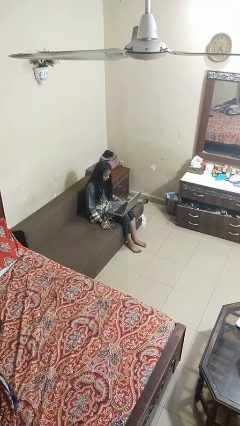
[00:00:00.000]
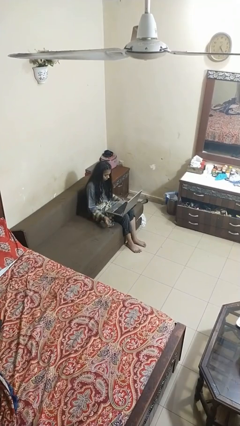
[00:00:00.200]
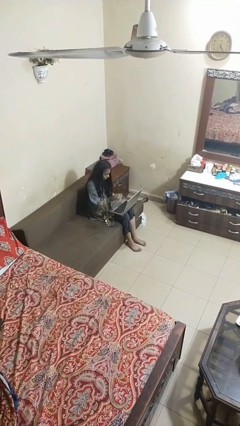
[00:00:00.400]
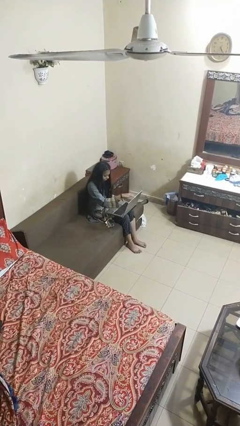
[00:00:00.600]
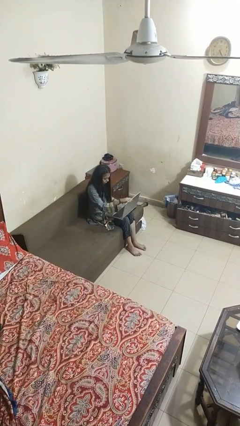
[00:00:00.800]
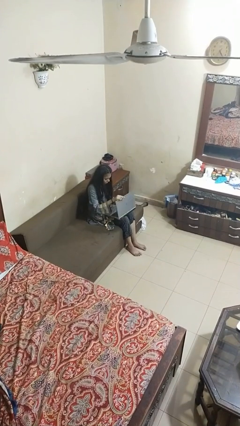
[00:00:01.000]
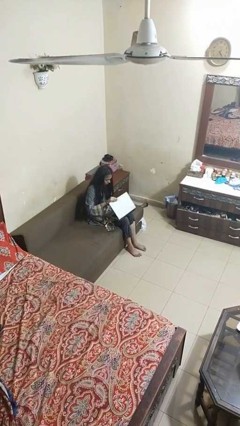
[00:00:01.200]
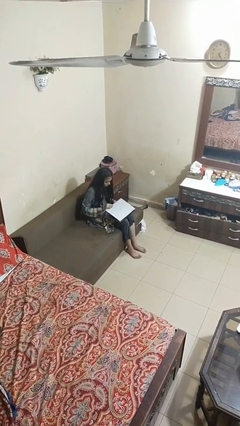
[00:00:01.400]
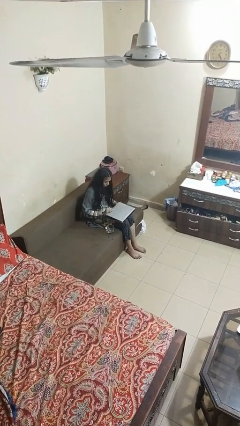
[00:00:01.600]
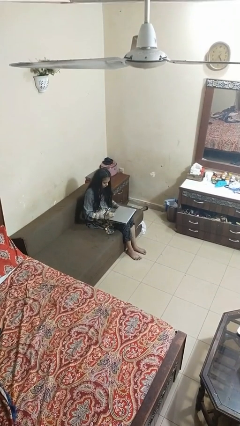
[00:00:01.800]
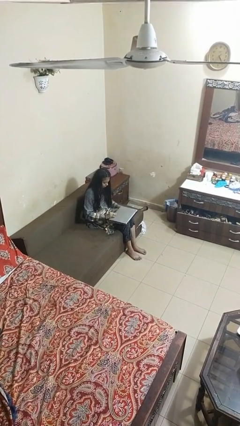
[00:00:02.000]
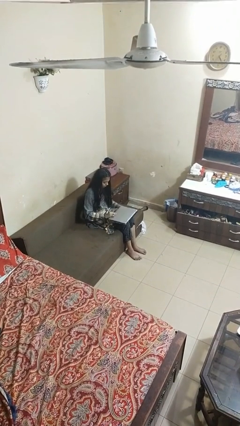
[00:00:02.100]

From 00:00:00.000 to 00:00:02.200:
person closes laptop

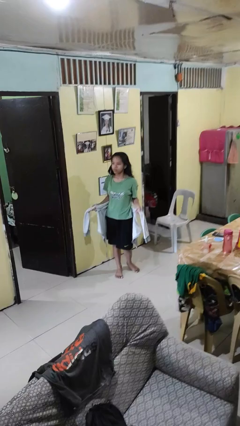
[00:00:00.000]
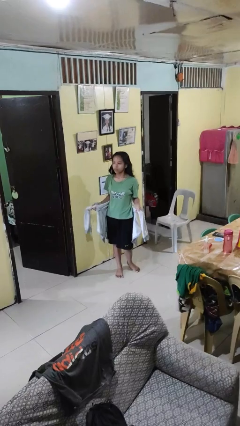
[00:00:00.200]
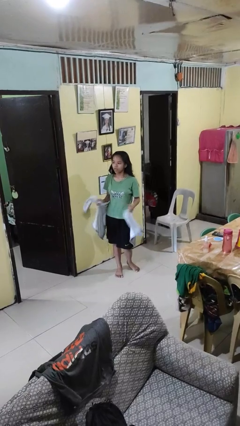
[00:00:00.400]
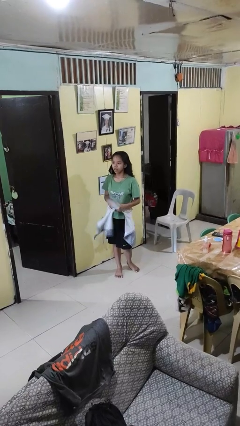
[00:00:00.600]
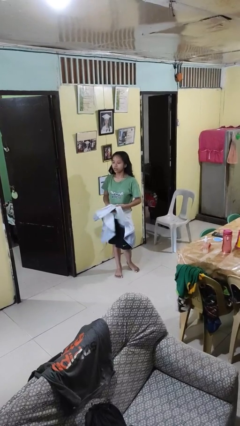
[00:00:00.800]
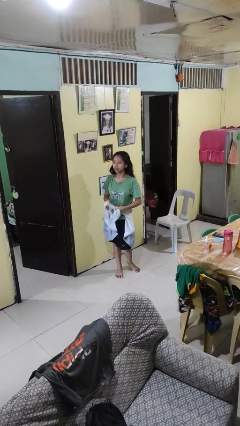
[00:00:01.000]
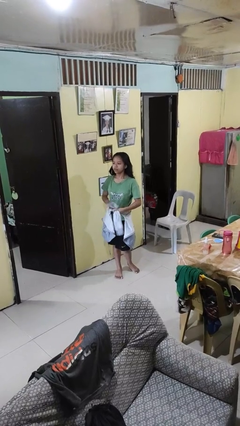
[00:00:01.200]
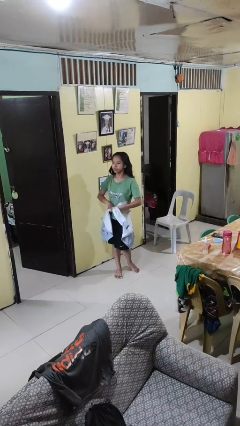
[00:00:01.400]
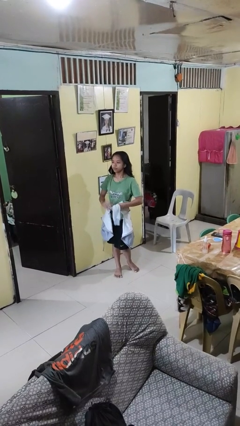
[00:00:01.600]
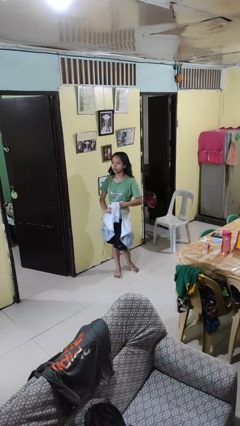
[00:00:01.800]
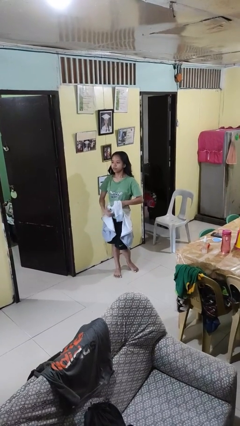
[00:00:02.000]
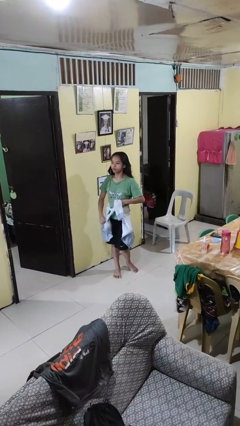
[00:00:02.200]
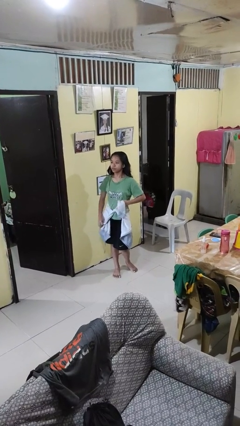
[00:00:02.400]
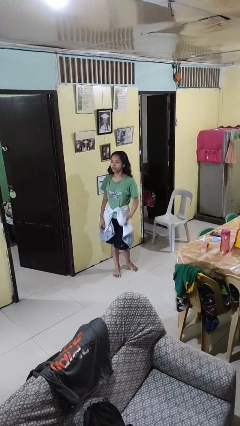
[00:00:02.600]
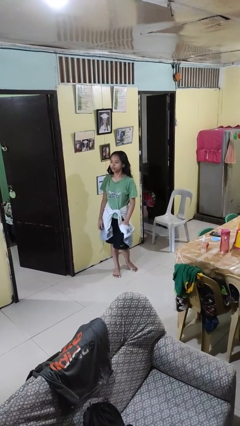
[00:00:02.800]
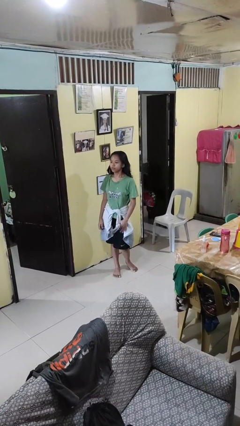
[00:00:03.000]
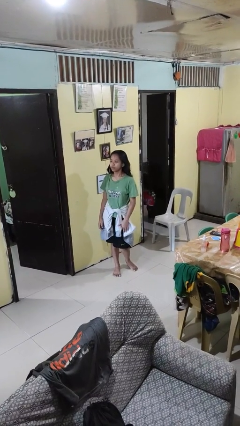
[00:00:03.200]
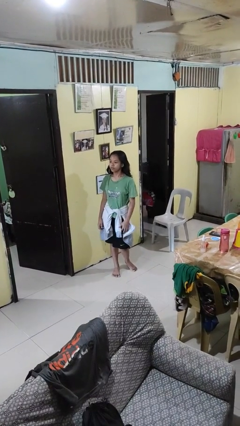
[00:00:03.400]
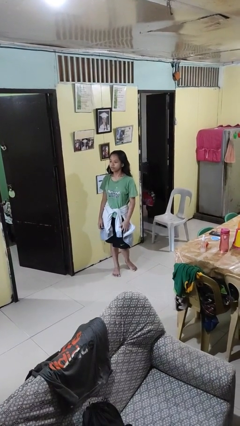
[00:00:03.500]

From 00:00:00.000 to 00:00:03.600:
person ties jacket around waist

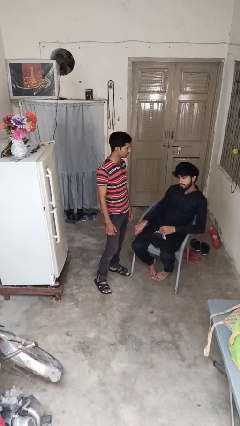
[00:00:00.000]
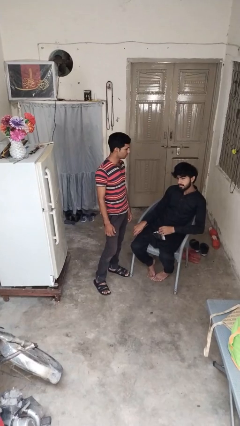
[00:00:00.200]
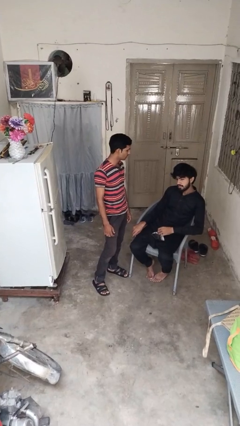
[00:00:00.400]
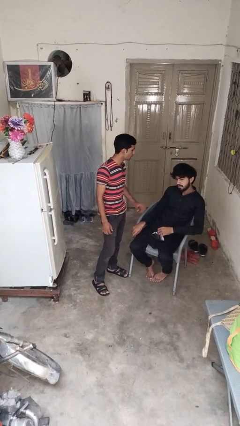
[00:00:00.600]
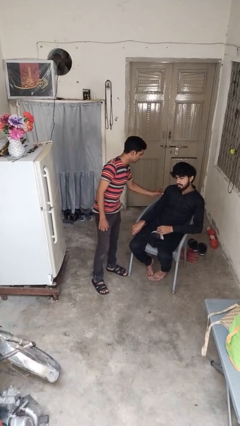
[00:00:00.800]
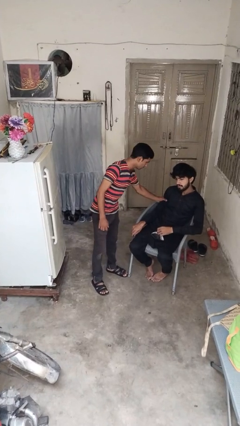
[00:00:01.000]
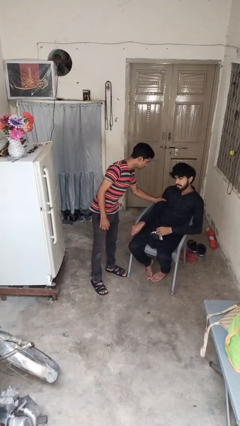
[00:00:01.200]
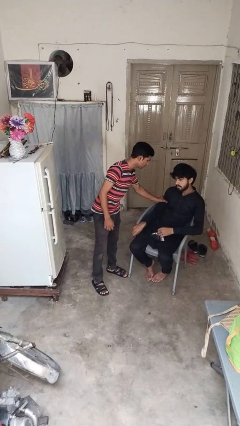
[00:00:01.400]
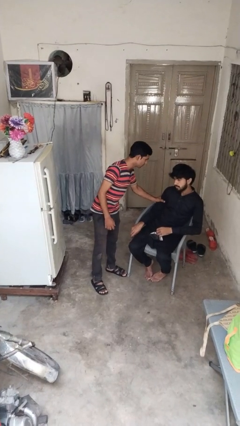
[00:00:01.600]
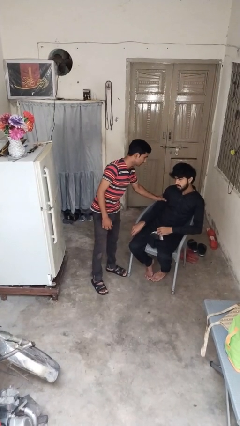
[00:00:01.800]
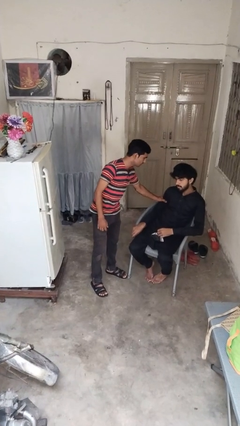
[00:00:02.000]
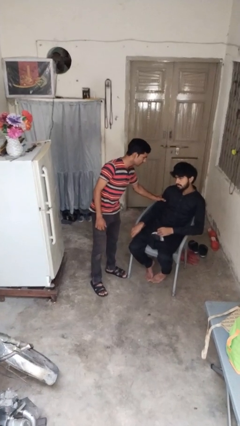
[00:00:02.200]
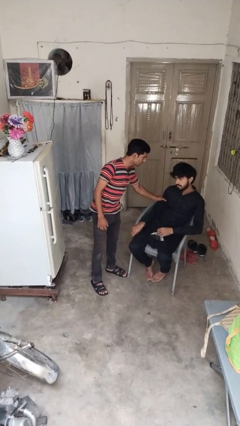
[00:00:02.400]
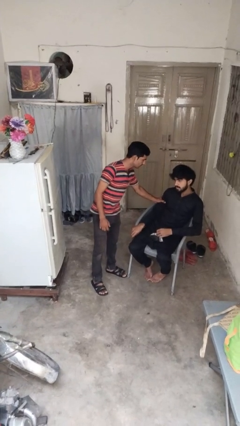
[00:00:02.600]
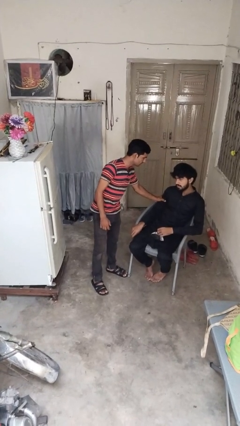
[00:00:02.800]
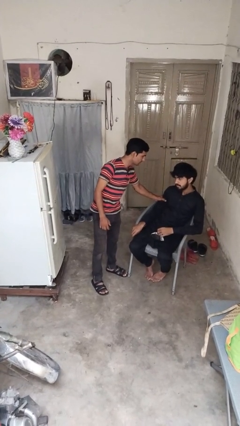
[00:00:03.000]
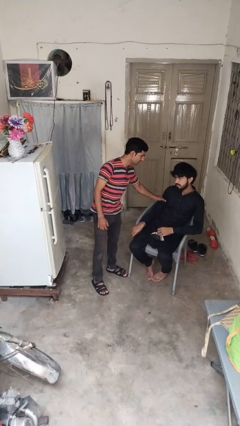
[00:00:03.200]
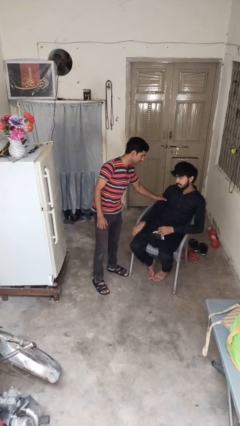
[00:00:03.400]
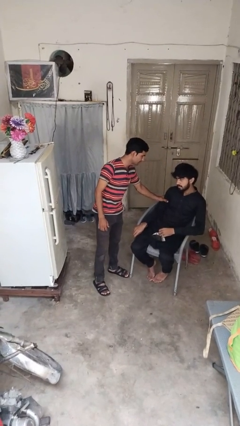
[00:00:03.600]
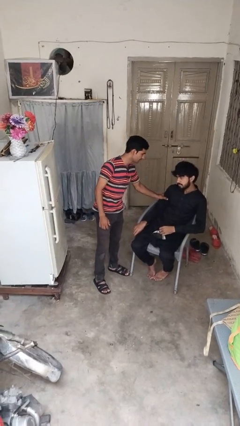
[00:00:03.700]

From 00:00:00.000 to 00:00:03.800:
person grabs person by bicep

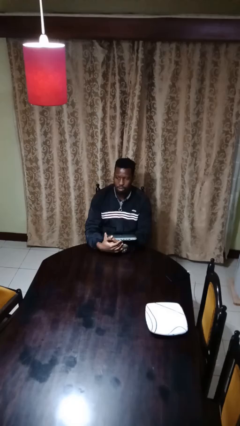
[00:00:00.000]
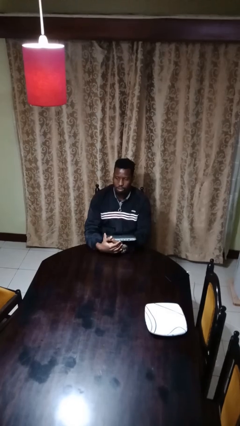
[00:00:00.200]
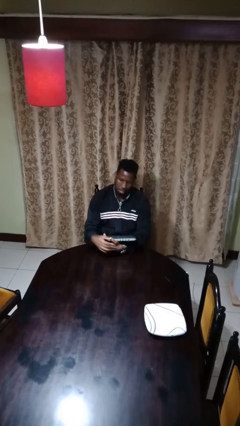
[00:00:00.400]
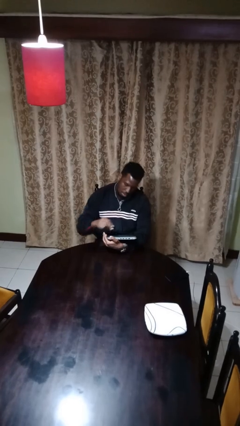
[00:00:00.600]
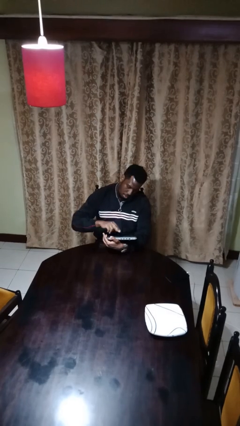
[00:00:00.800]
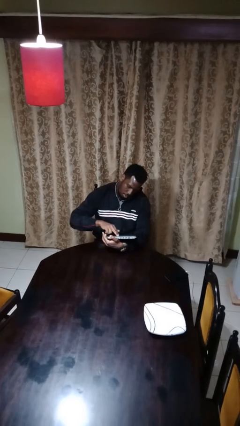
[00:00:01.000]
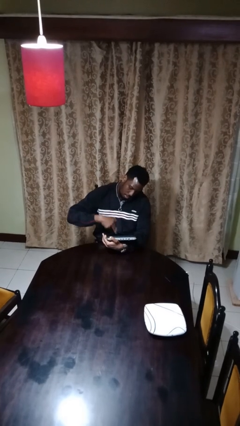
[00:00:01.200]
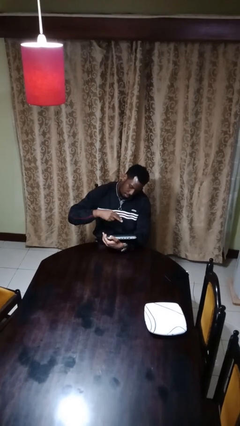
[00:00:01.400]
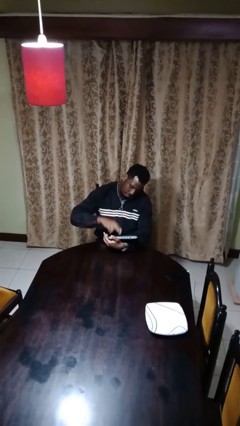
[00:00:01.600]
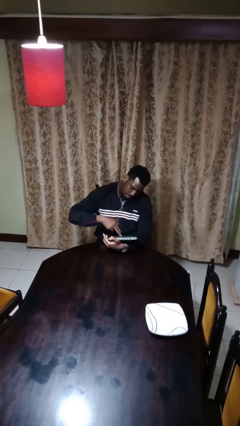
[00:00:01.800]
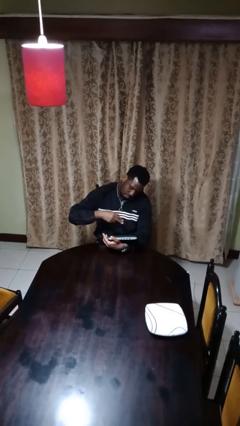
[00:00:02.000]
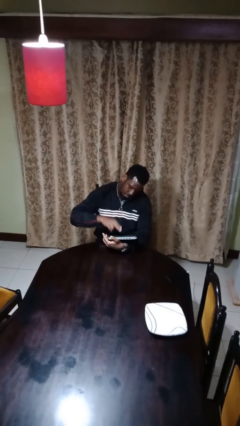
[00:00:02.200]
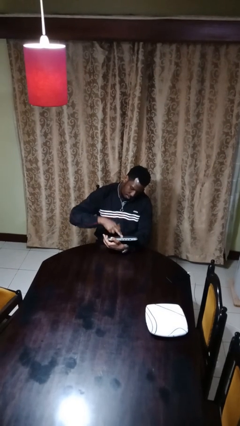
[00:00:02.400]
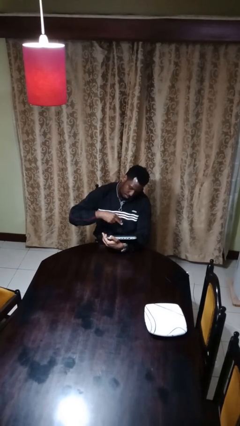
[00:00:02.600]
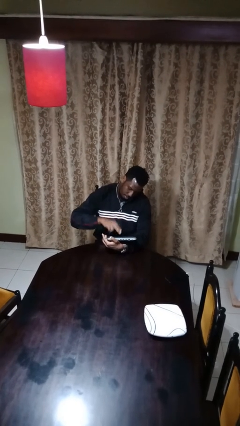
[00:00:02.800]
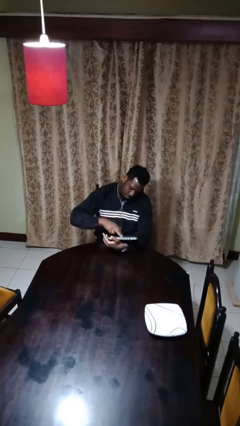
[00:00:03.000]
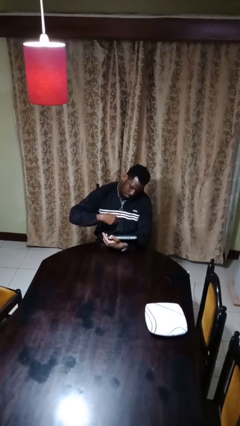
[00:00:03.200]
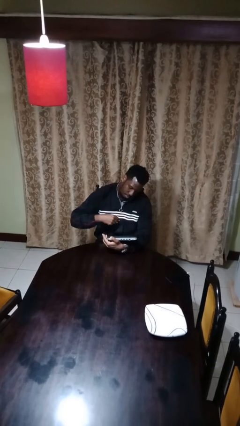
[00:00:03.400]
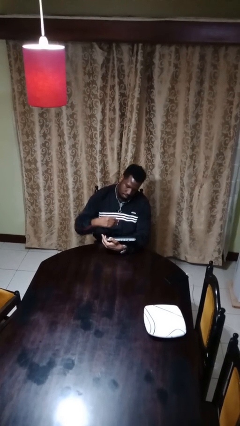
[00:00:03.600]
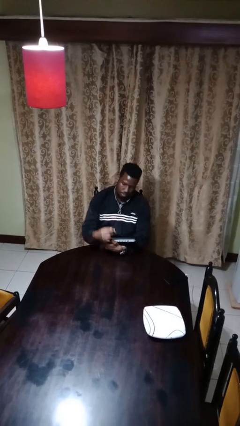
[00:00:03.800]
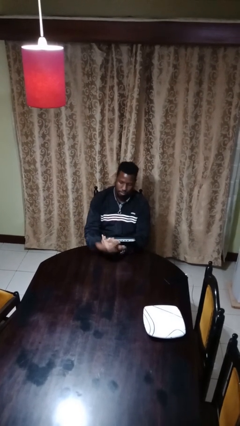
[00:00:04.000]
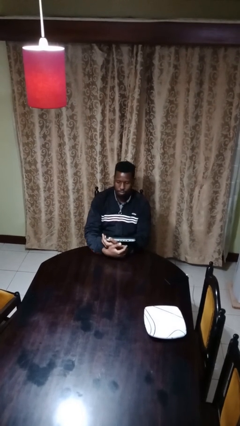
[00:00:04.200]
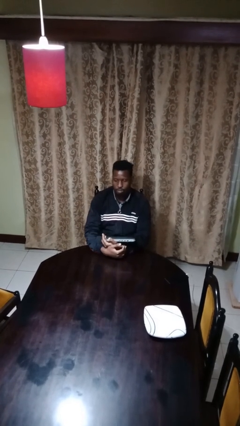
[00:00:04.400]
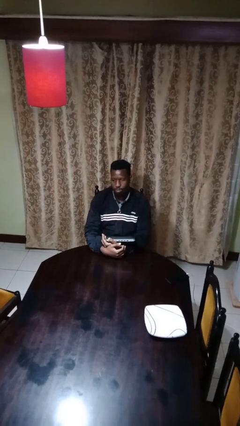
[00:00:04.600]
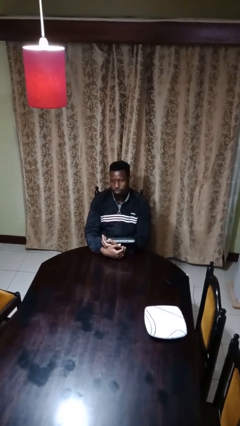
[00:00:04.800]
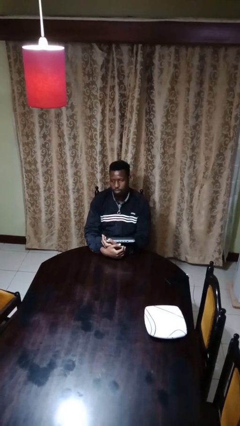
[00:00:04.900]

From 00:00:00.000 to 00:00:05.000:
person interacts with tablet

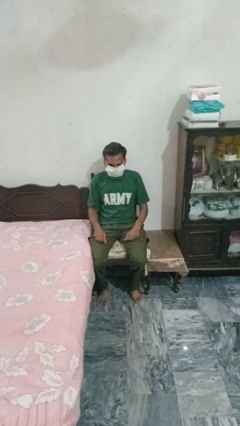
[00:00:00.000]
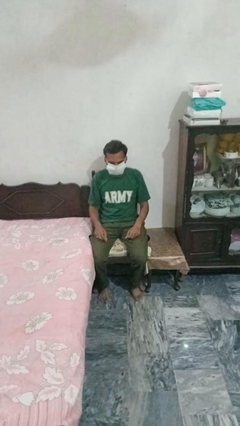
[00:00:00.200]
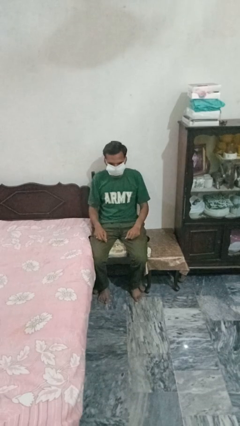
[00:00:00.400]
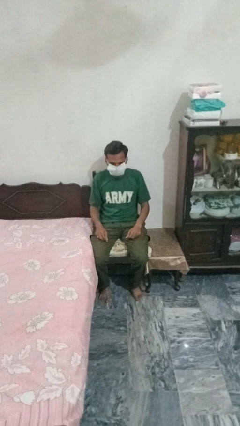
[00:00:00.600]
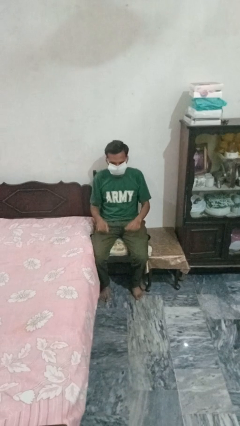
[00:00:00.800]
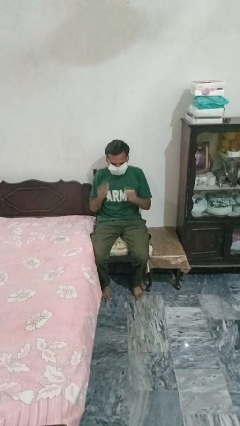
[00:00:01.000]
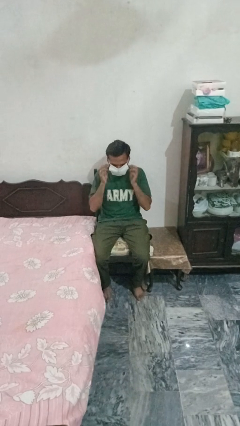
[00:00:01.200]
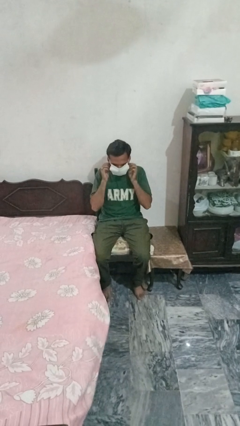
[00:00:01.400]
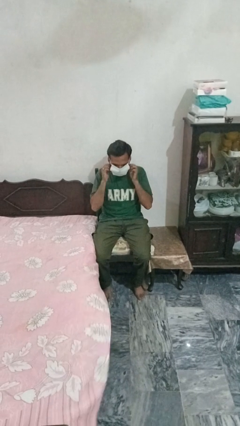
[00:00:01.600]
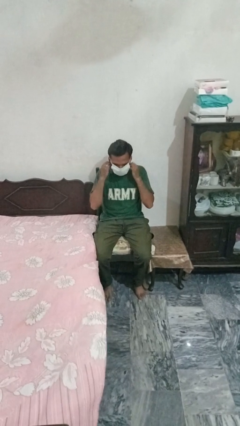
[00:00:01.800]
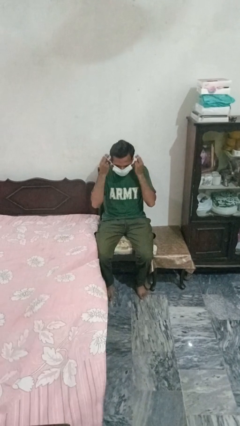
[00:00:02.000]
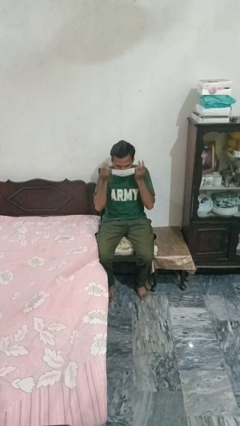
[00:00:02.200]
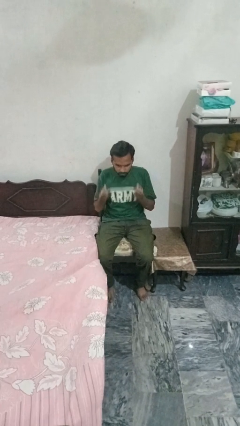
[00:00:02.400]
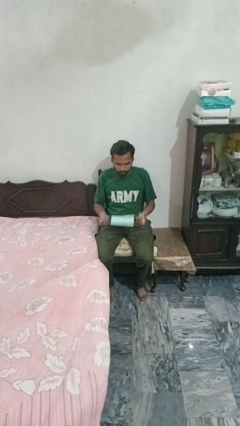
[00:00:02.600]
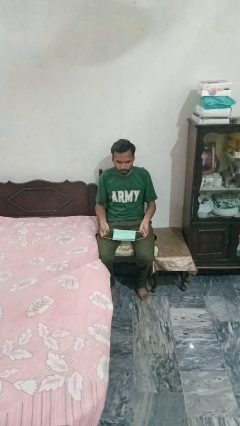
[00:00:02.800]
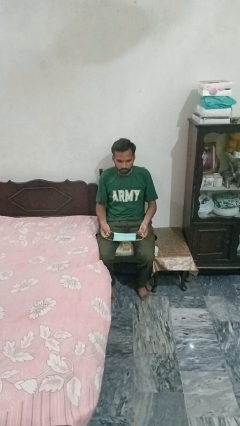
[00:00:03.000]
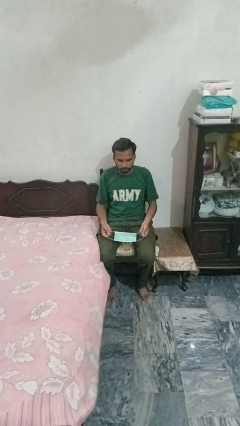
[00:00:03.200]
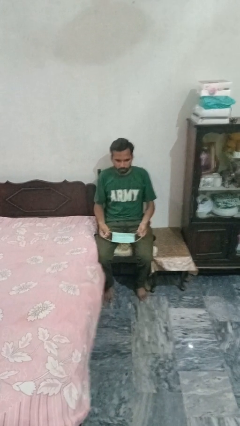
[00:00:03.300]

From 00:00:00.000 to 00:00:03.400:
person takes off facemask
